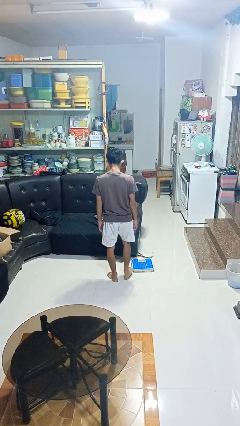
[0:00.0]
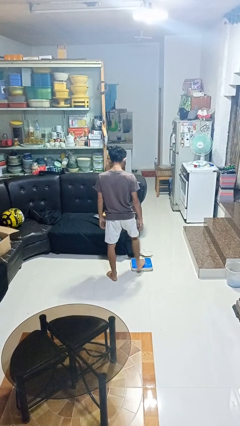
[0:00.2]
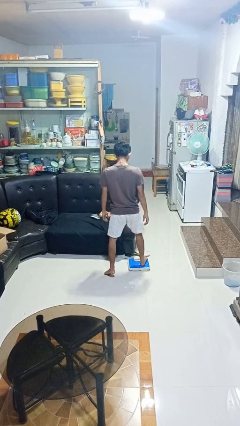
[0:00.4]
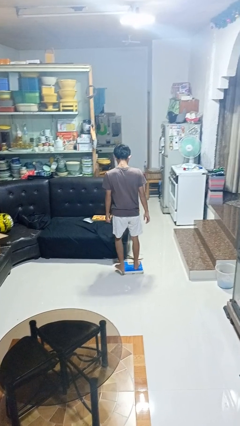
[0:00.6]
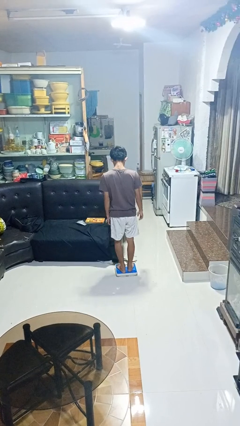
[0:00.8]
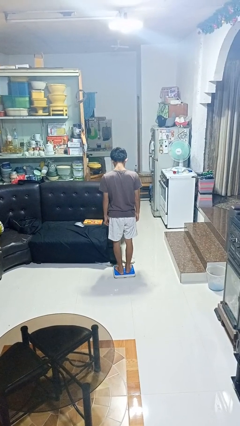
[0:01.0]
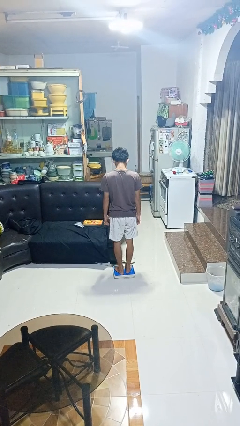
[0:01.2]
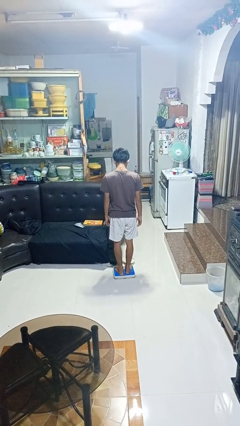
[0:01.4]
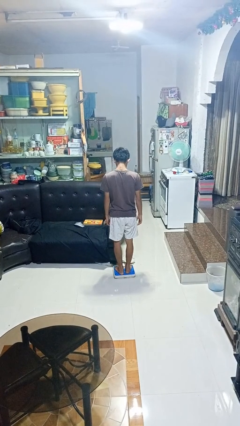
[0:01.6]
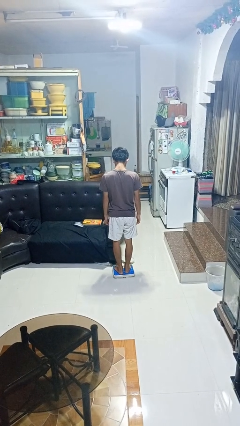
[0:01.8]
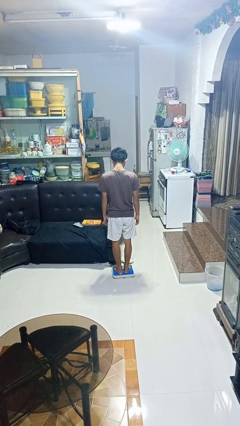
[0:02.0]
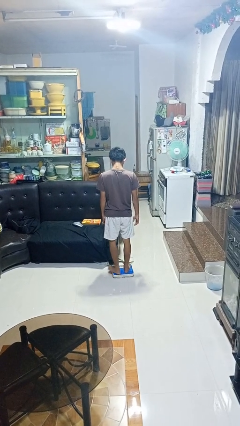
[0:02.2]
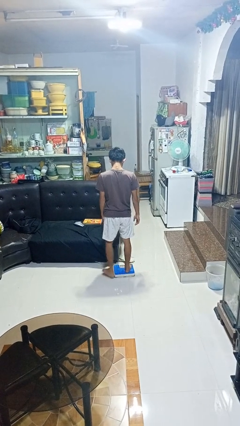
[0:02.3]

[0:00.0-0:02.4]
person uses bodyweight scale

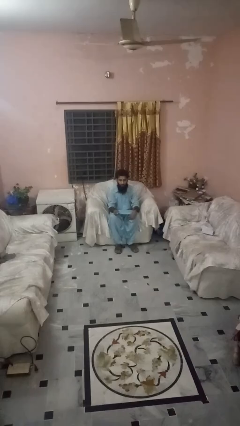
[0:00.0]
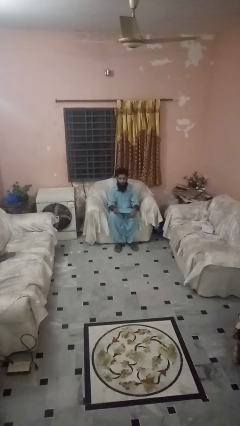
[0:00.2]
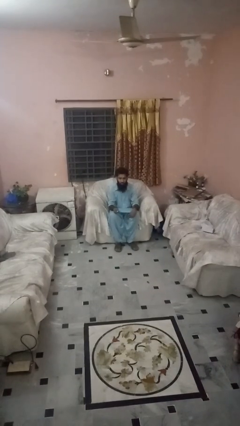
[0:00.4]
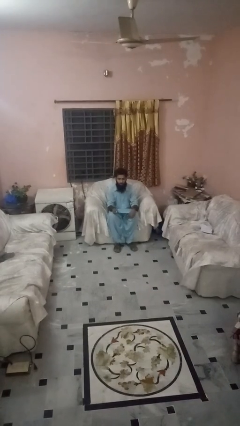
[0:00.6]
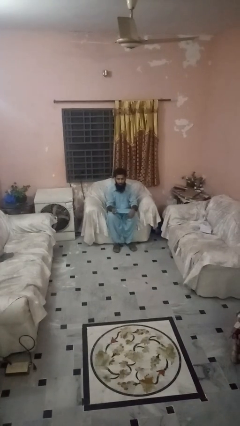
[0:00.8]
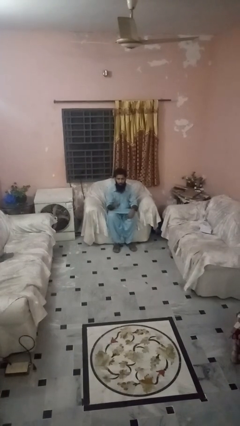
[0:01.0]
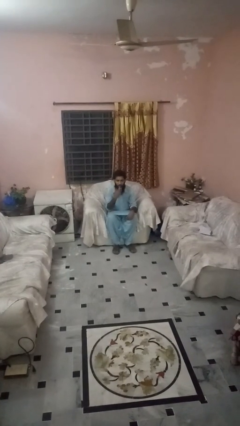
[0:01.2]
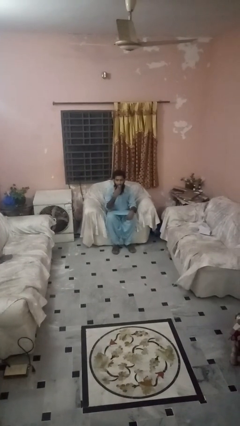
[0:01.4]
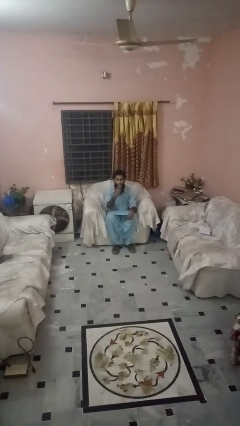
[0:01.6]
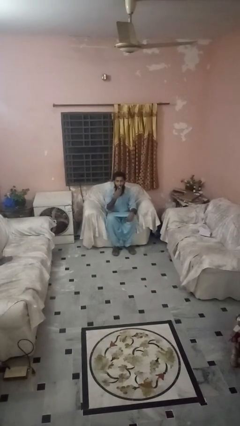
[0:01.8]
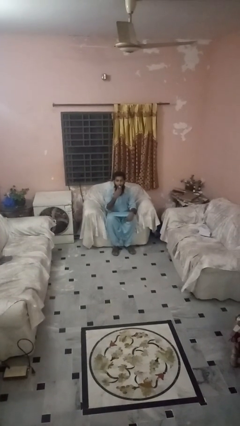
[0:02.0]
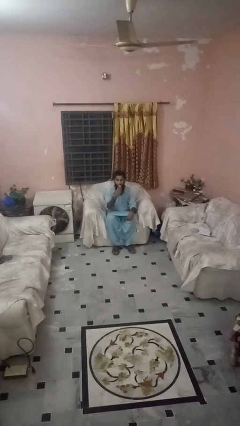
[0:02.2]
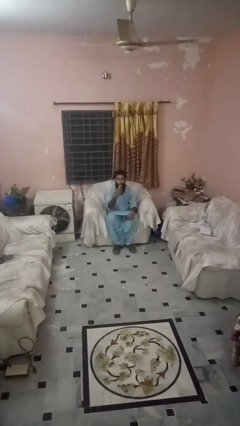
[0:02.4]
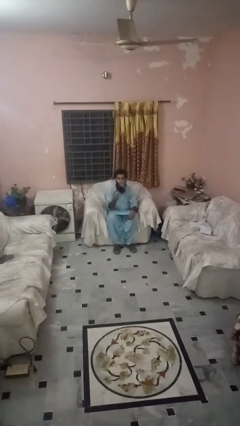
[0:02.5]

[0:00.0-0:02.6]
person vapes

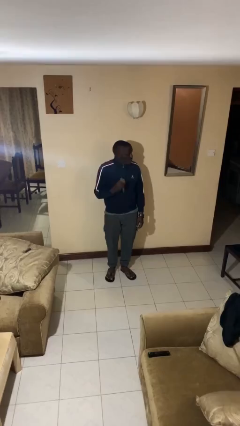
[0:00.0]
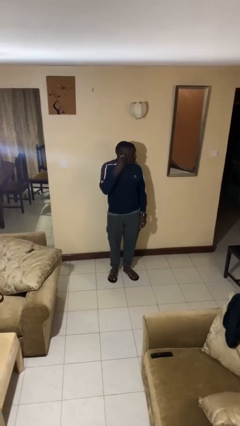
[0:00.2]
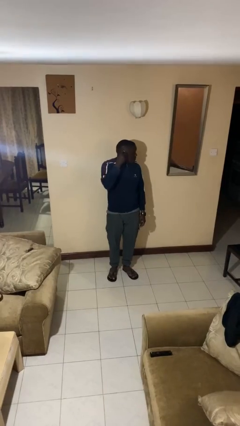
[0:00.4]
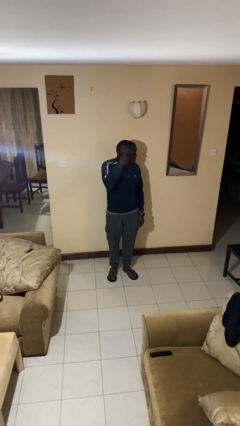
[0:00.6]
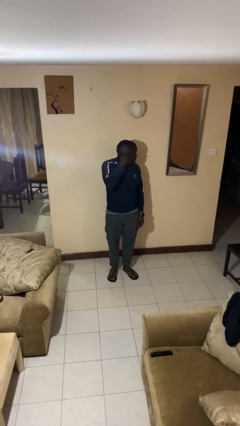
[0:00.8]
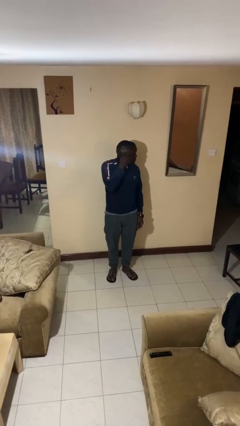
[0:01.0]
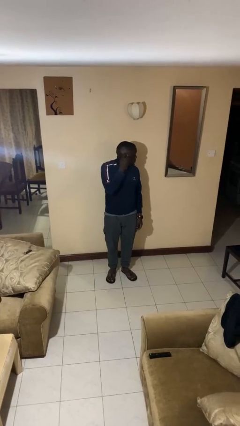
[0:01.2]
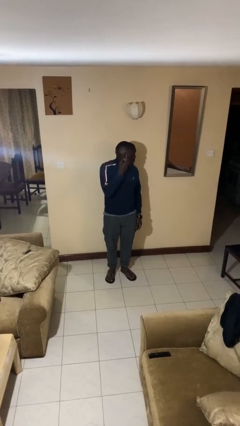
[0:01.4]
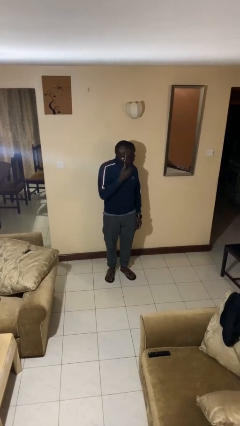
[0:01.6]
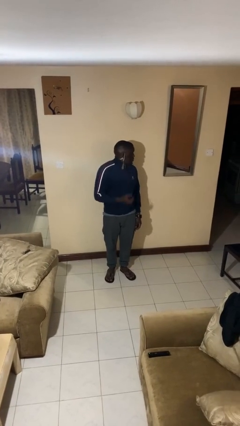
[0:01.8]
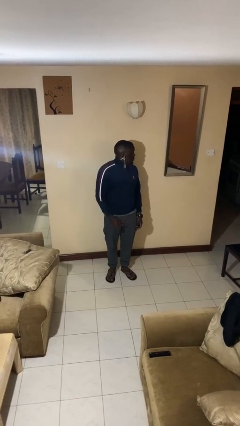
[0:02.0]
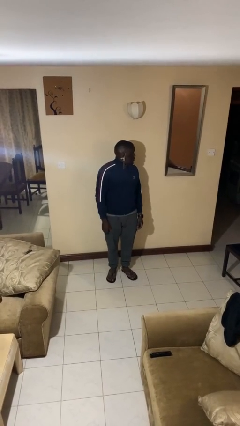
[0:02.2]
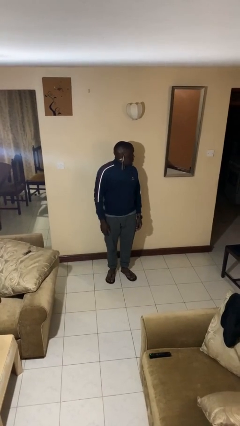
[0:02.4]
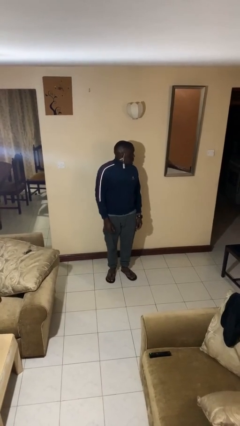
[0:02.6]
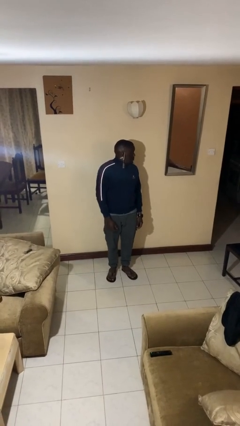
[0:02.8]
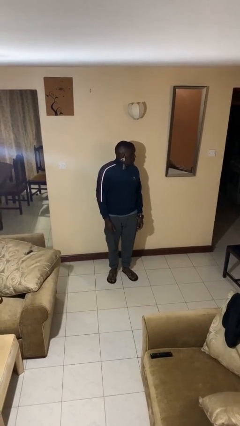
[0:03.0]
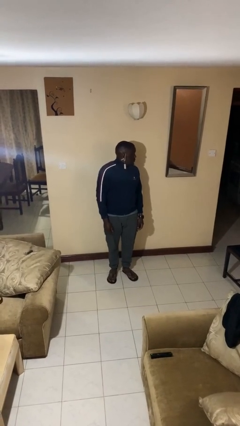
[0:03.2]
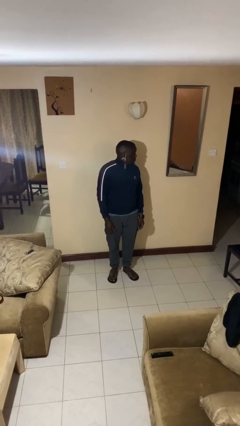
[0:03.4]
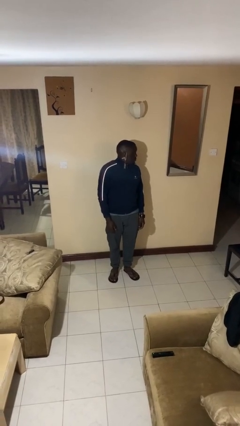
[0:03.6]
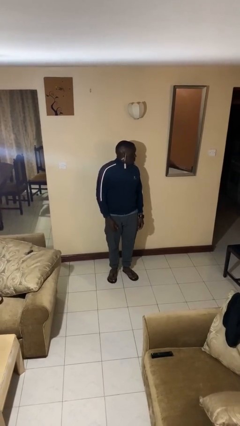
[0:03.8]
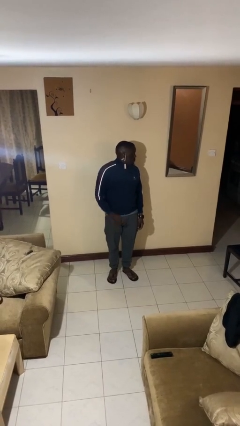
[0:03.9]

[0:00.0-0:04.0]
person puts on earrings

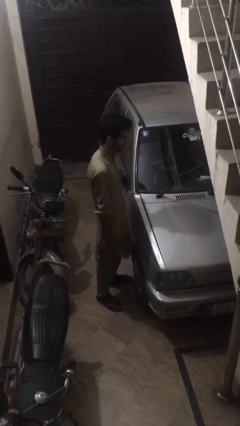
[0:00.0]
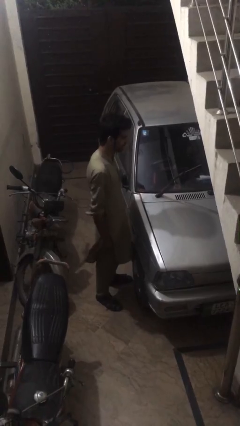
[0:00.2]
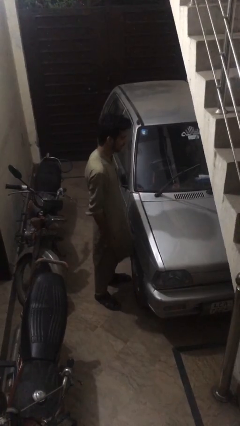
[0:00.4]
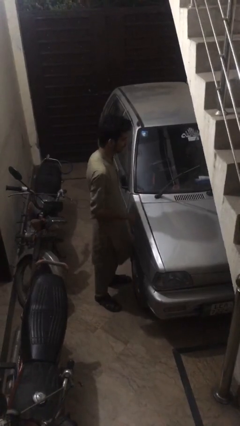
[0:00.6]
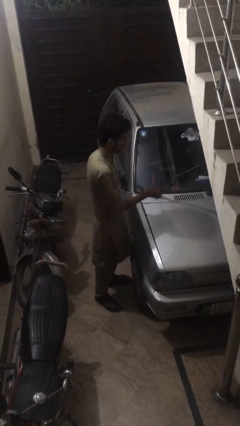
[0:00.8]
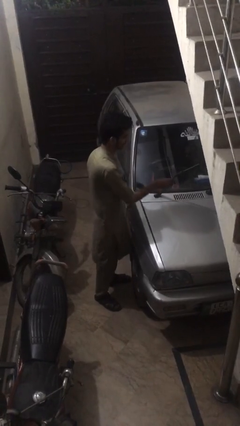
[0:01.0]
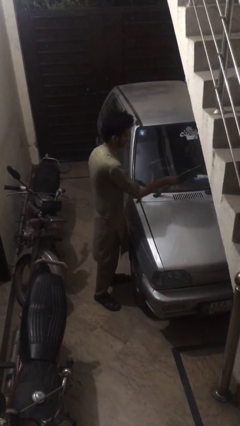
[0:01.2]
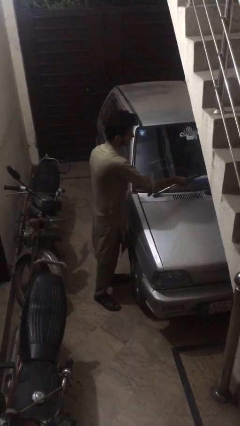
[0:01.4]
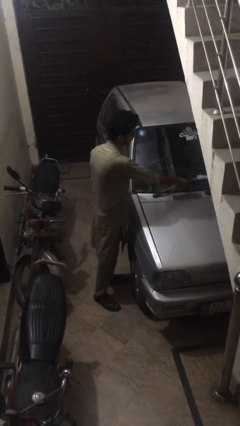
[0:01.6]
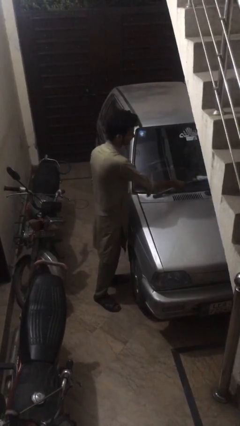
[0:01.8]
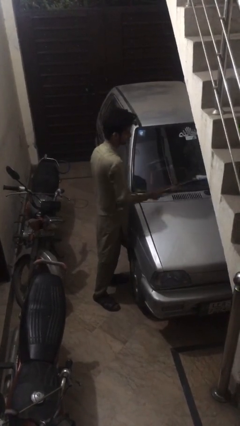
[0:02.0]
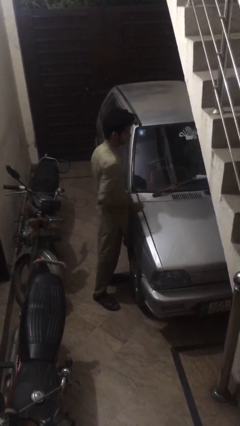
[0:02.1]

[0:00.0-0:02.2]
person flips down car wipers

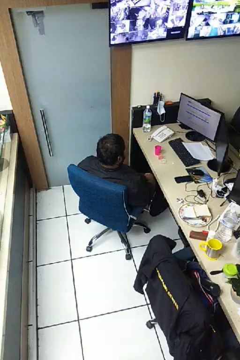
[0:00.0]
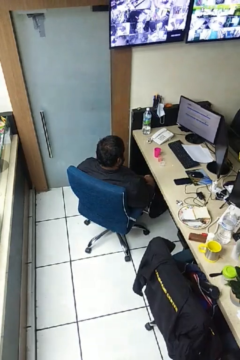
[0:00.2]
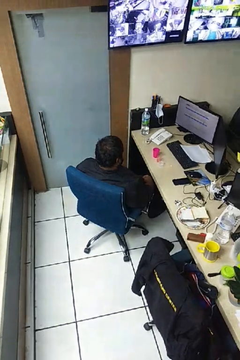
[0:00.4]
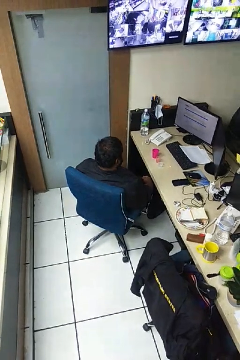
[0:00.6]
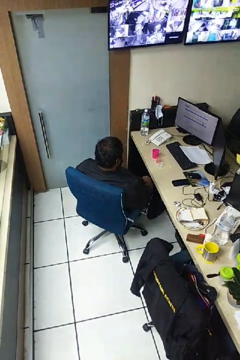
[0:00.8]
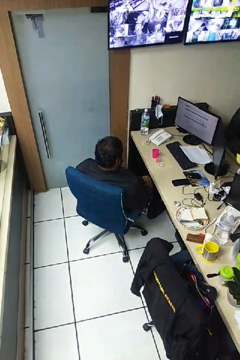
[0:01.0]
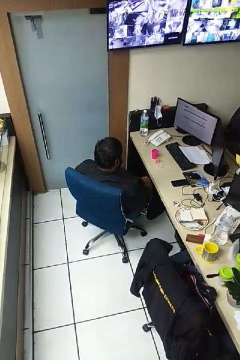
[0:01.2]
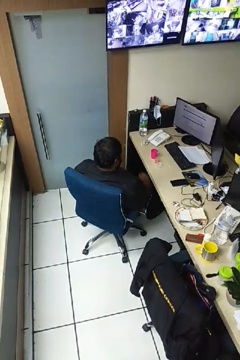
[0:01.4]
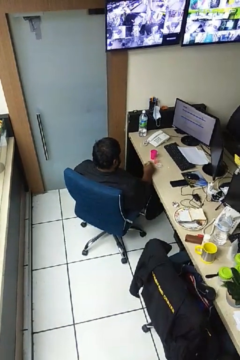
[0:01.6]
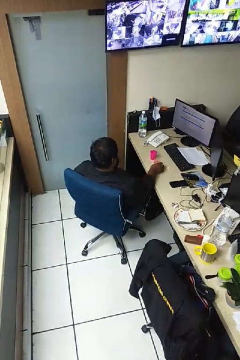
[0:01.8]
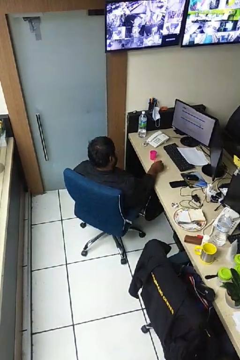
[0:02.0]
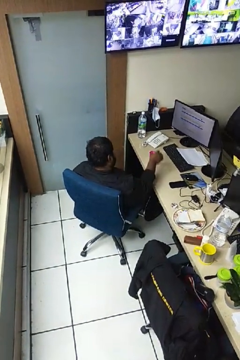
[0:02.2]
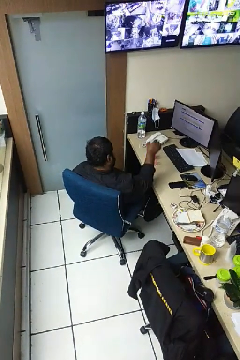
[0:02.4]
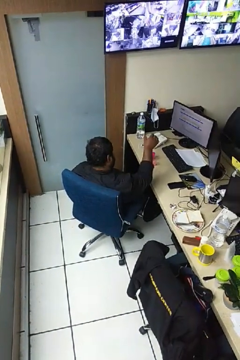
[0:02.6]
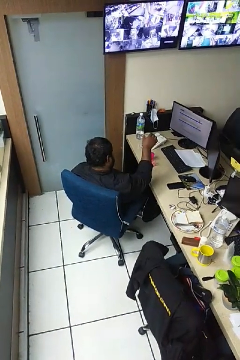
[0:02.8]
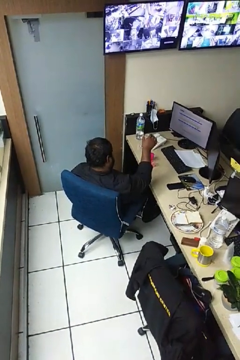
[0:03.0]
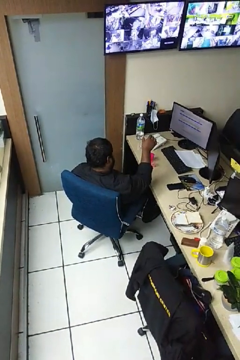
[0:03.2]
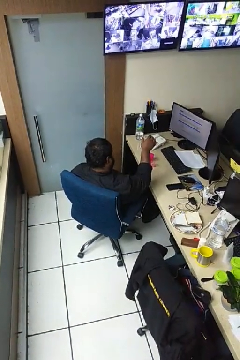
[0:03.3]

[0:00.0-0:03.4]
person picks up object from table

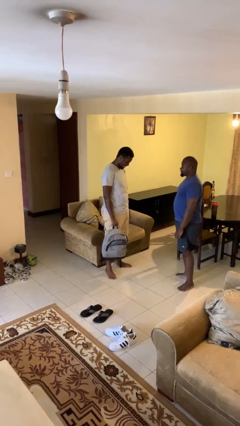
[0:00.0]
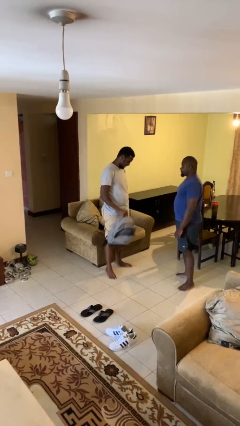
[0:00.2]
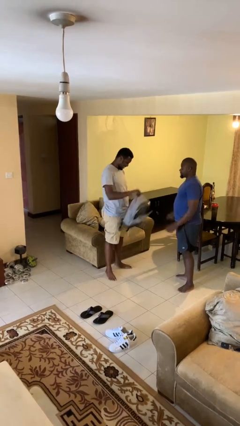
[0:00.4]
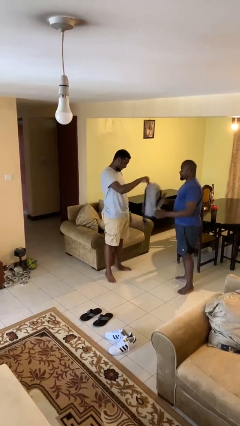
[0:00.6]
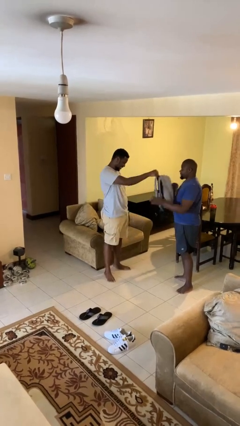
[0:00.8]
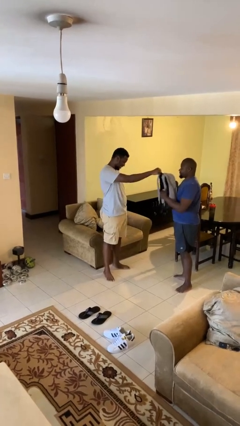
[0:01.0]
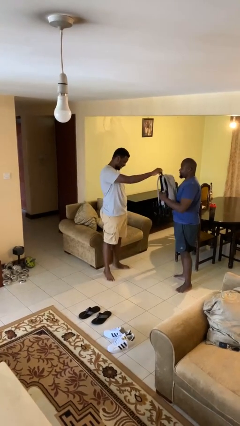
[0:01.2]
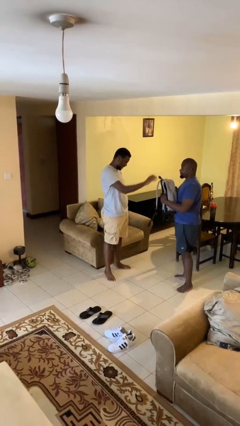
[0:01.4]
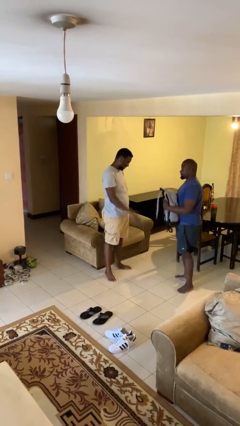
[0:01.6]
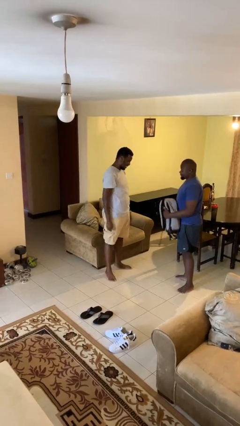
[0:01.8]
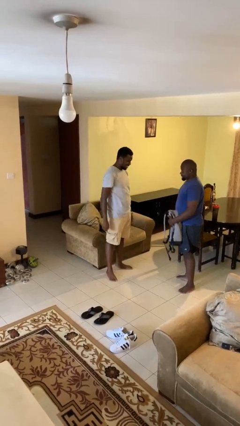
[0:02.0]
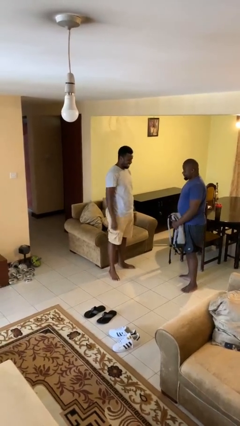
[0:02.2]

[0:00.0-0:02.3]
person transfers object to person

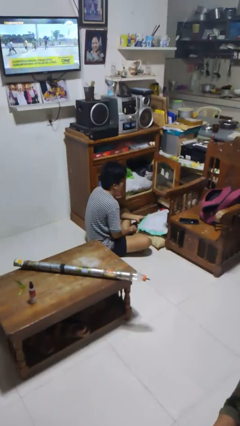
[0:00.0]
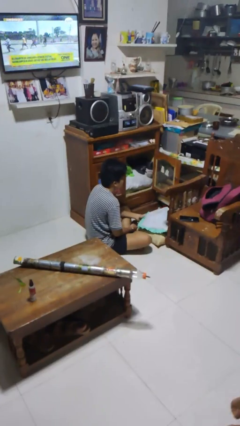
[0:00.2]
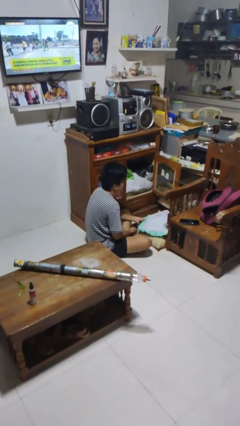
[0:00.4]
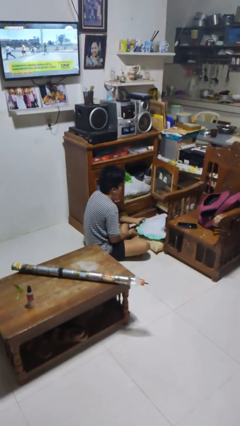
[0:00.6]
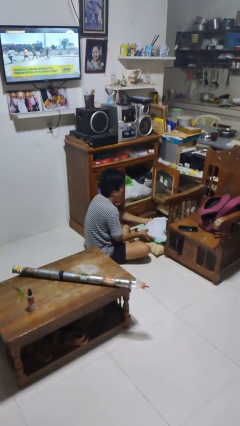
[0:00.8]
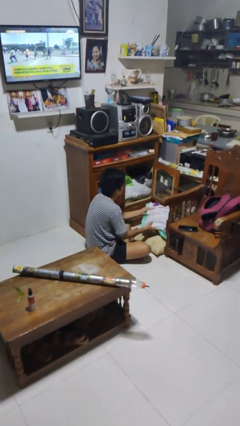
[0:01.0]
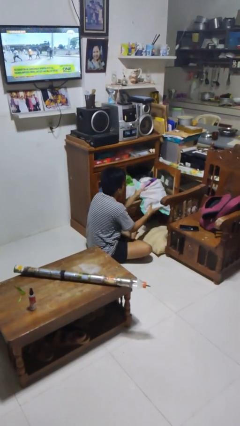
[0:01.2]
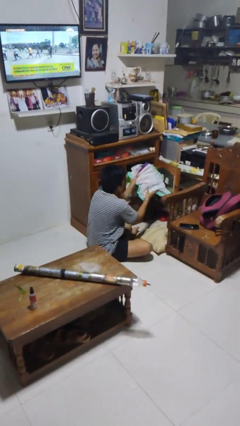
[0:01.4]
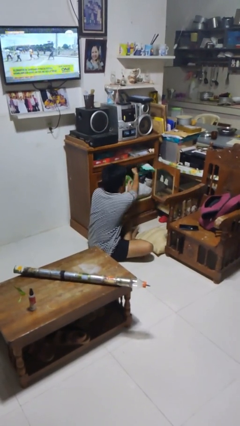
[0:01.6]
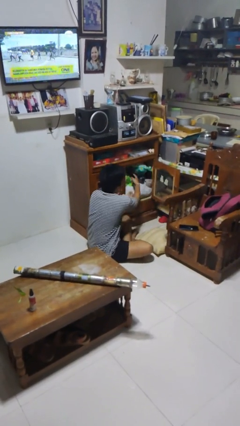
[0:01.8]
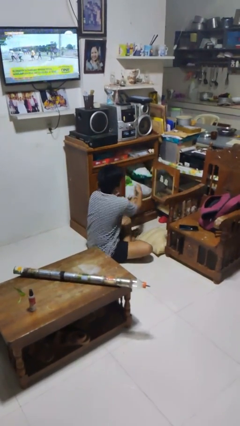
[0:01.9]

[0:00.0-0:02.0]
person takes clothes from dresser
